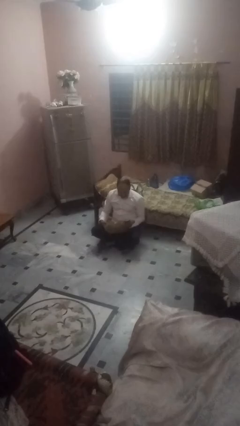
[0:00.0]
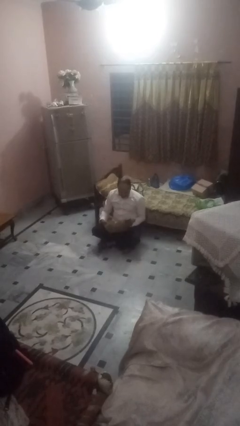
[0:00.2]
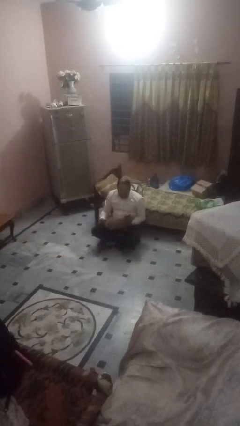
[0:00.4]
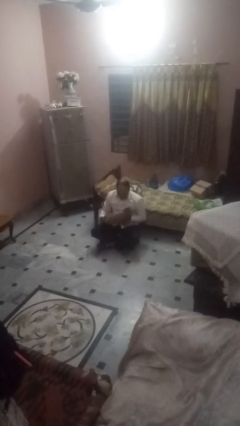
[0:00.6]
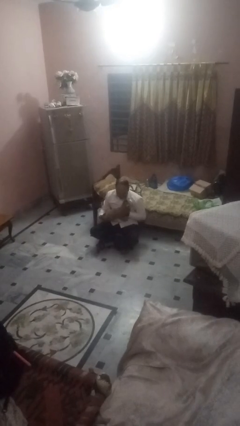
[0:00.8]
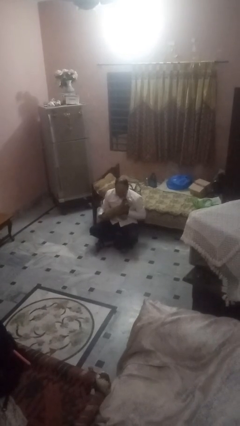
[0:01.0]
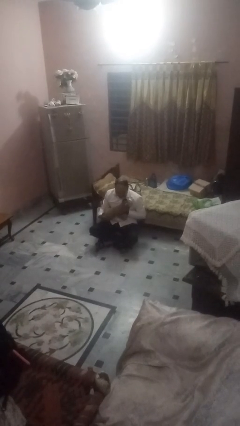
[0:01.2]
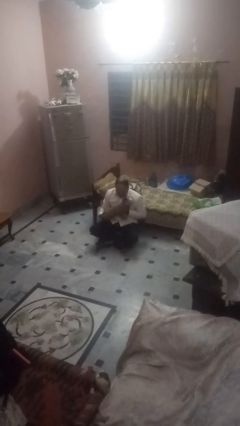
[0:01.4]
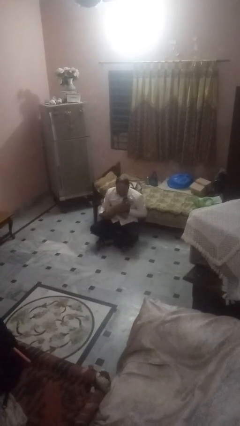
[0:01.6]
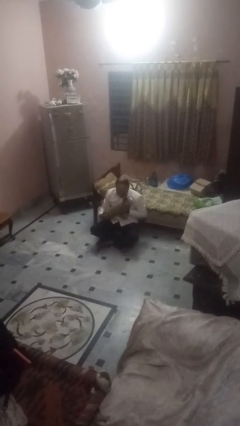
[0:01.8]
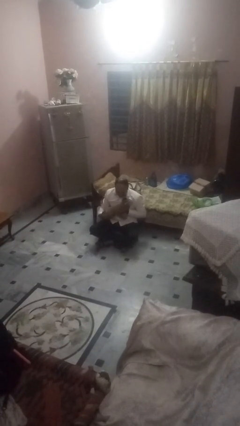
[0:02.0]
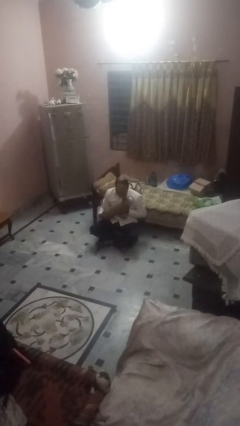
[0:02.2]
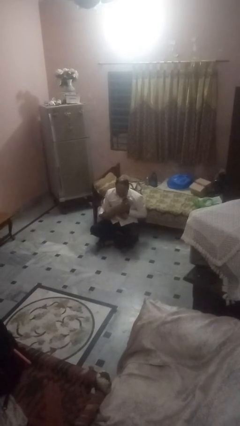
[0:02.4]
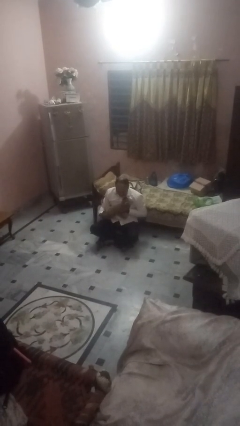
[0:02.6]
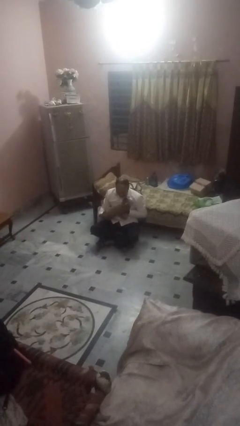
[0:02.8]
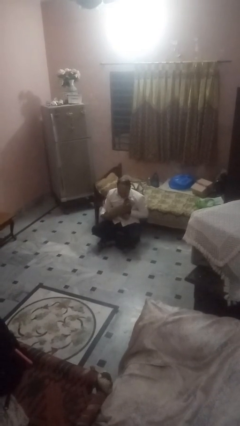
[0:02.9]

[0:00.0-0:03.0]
person hugs dog

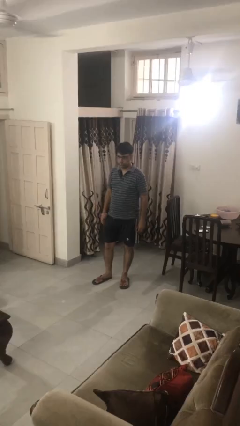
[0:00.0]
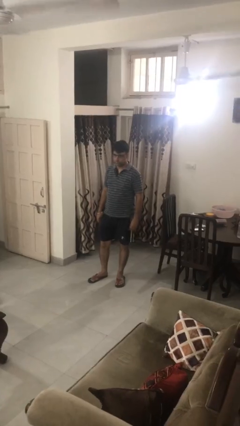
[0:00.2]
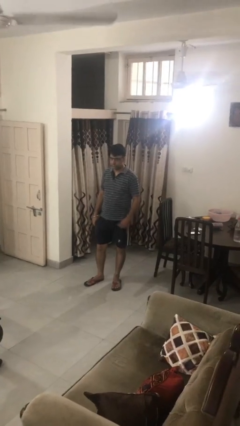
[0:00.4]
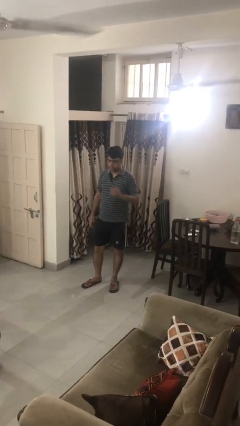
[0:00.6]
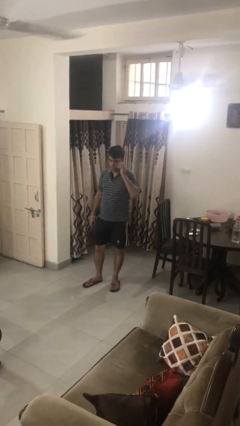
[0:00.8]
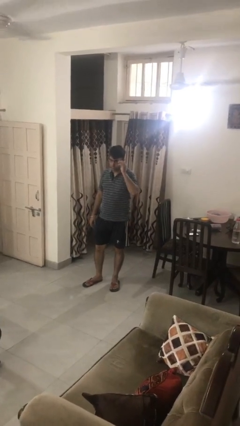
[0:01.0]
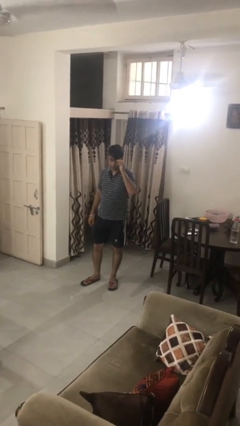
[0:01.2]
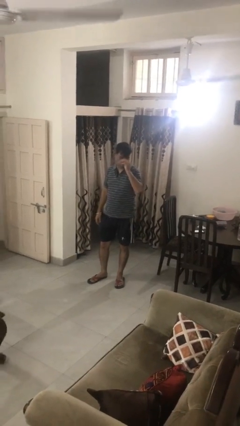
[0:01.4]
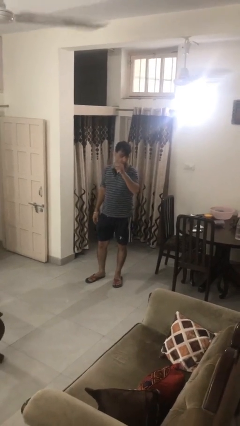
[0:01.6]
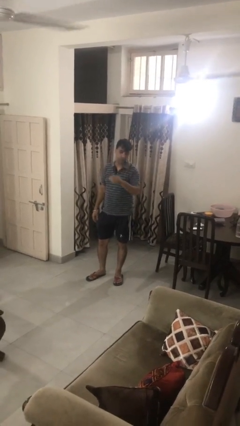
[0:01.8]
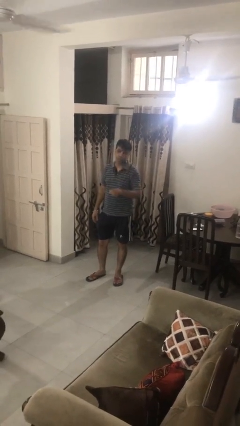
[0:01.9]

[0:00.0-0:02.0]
person takes off glasses

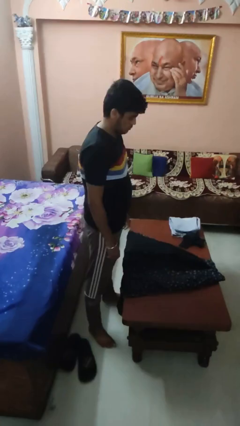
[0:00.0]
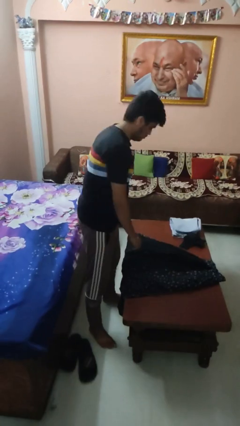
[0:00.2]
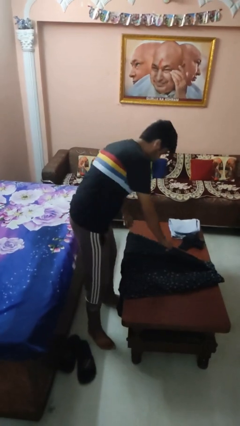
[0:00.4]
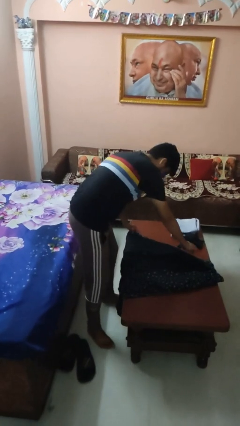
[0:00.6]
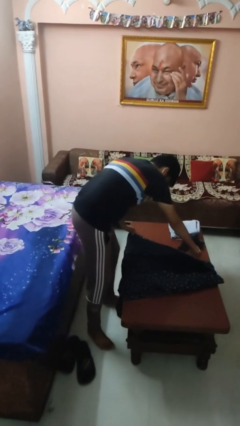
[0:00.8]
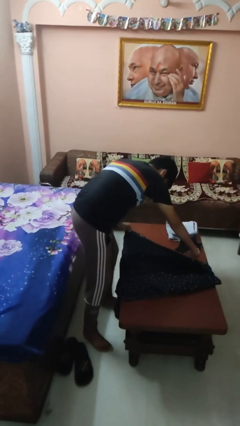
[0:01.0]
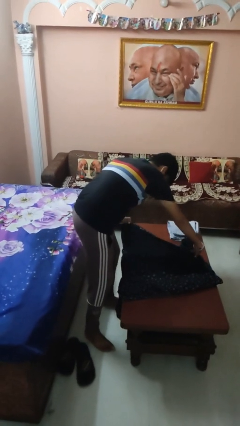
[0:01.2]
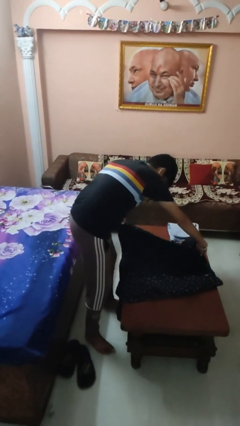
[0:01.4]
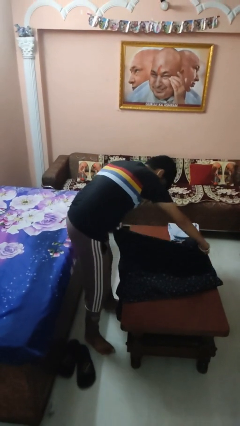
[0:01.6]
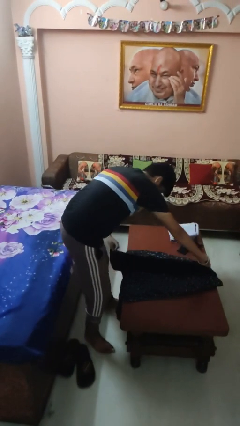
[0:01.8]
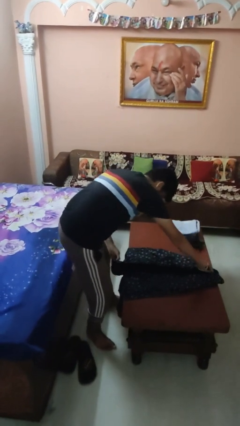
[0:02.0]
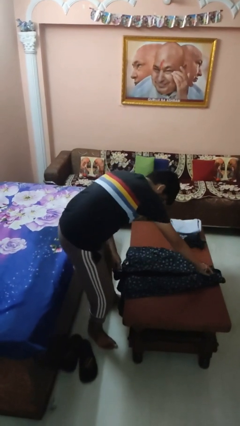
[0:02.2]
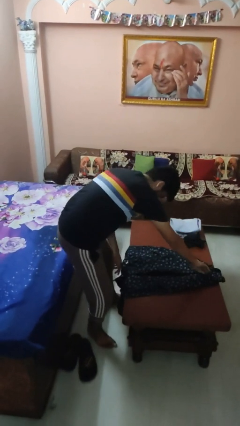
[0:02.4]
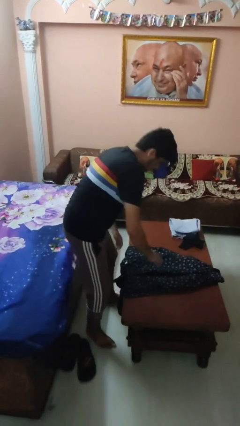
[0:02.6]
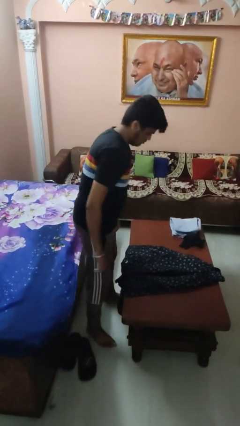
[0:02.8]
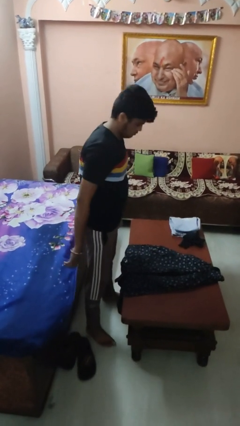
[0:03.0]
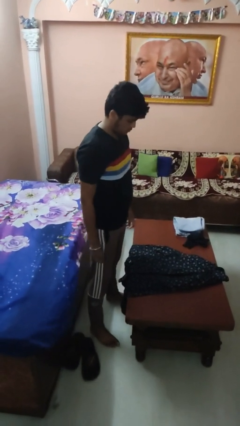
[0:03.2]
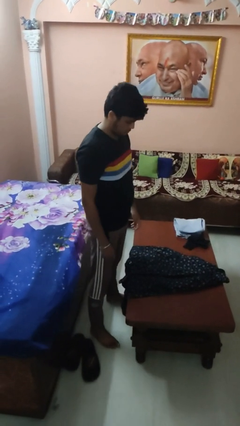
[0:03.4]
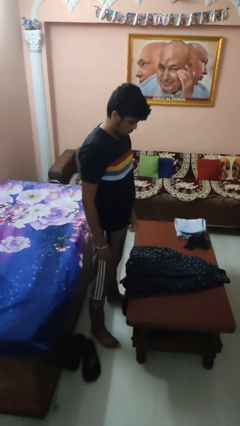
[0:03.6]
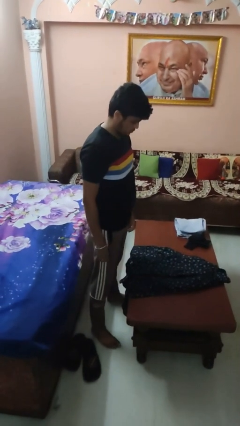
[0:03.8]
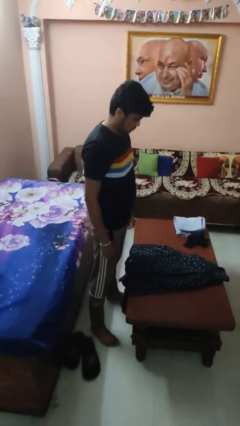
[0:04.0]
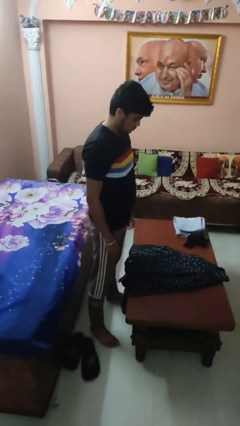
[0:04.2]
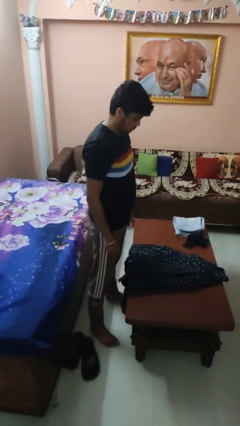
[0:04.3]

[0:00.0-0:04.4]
person folds shirt

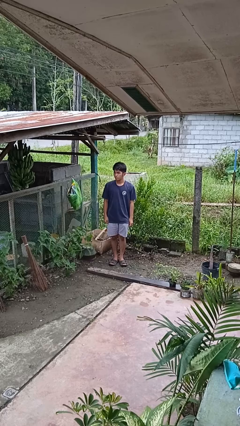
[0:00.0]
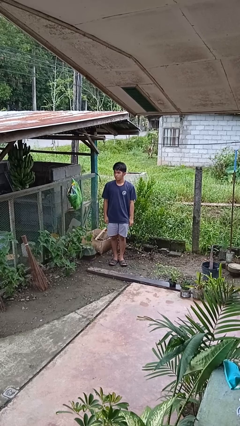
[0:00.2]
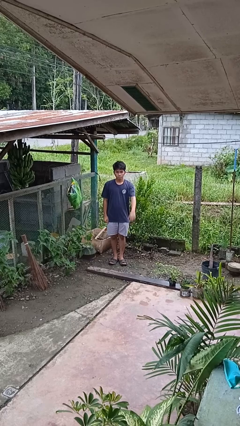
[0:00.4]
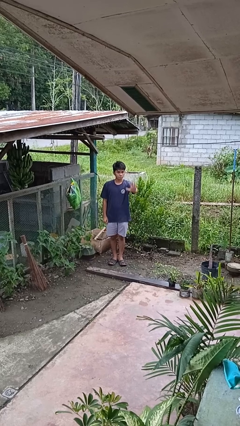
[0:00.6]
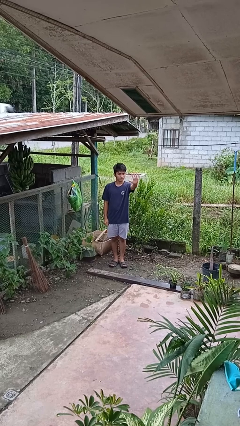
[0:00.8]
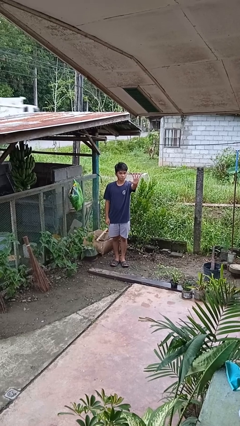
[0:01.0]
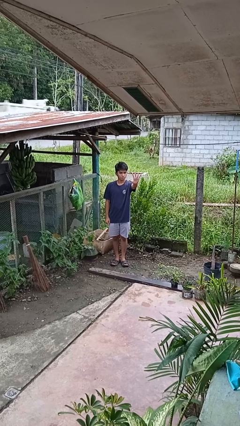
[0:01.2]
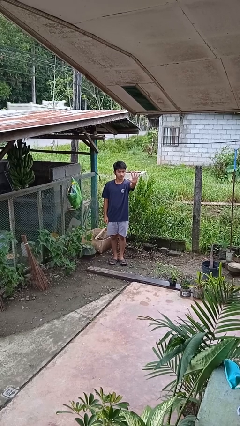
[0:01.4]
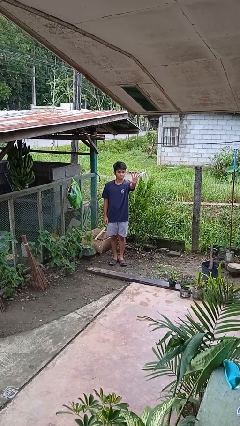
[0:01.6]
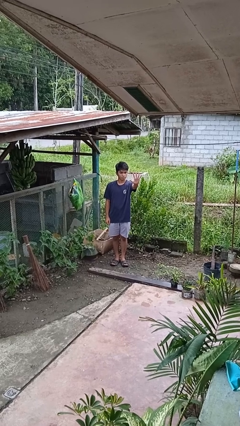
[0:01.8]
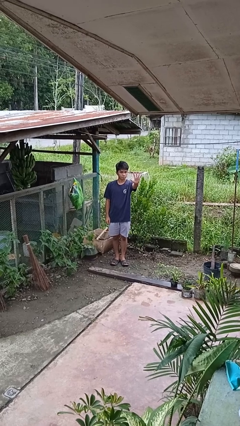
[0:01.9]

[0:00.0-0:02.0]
person gestures number five

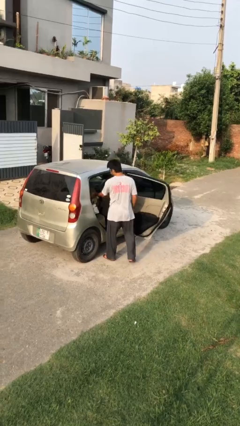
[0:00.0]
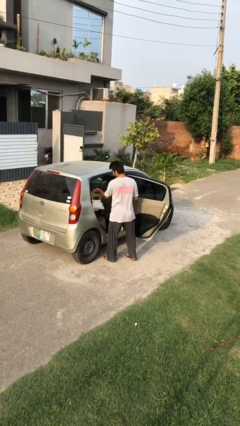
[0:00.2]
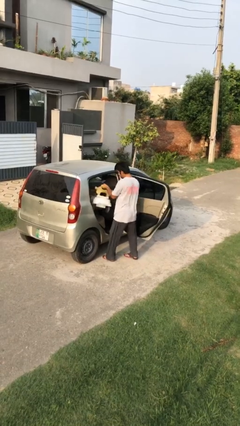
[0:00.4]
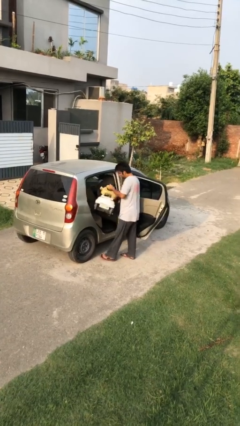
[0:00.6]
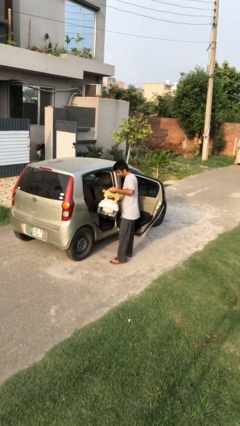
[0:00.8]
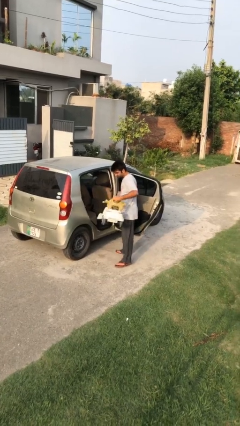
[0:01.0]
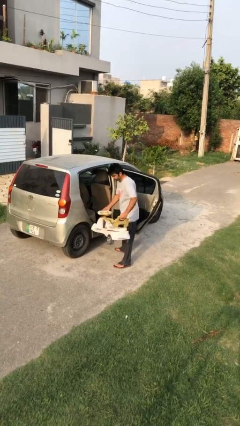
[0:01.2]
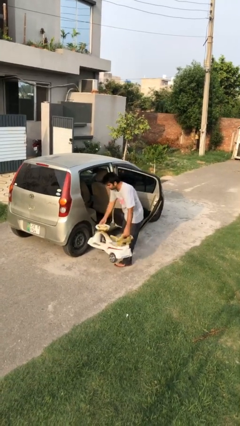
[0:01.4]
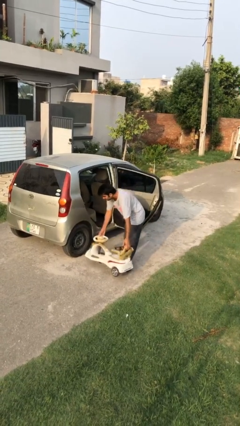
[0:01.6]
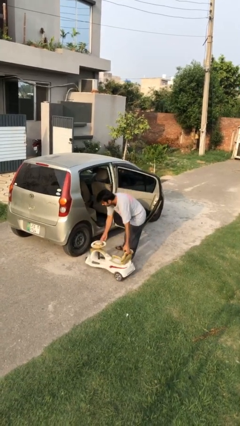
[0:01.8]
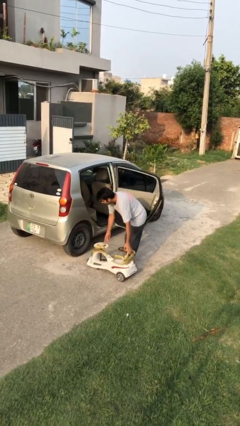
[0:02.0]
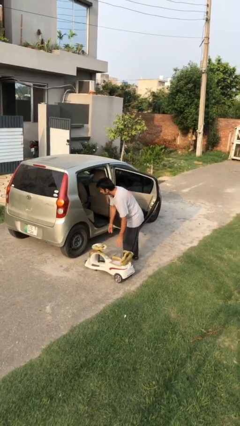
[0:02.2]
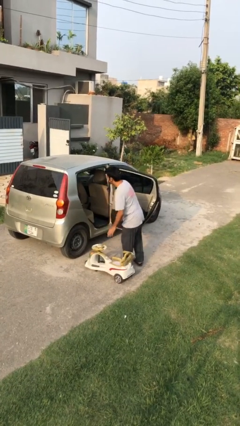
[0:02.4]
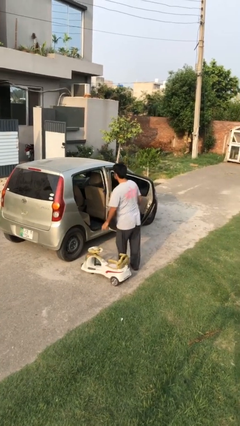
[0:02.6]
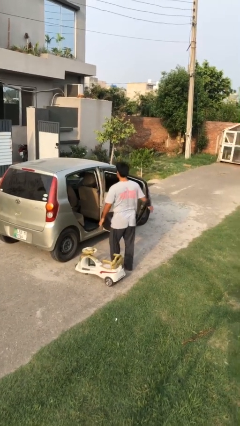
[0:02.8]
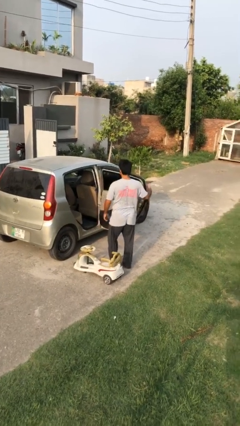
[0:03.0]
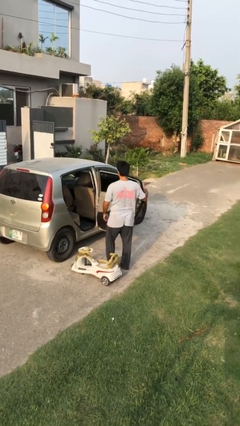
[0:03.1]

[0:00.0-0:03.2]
person unloads car

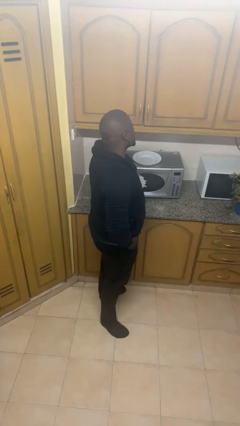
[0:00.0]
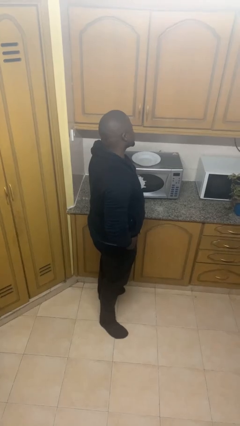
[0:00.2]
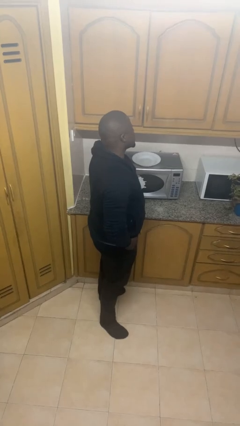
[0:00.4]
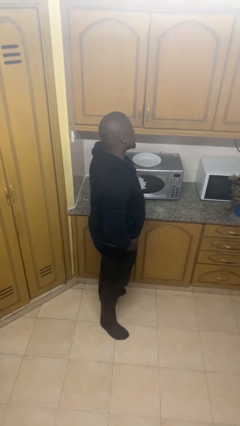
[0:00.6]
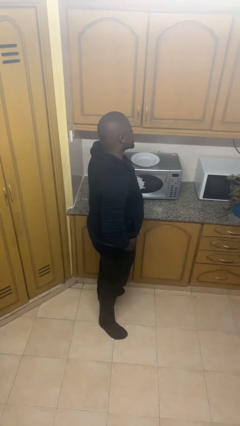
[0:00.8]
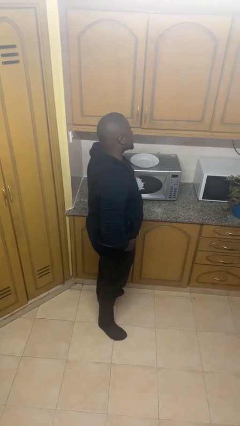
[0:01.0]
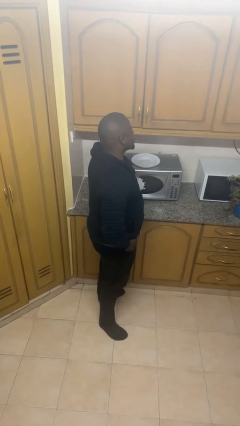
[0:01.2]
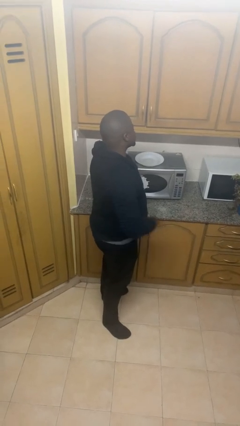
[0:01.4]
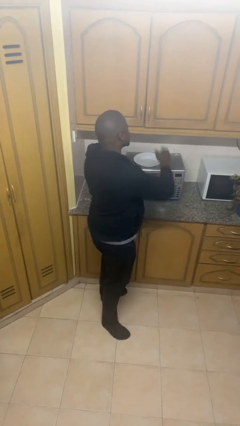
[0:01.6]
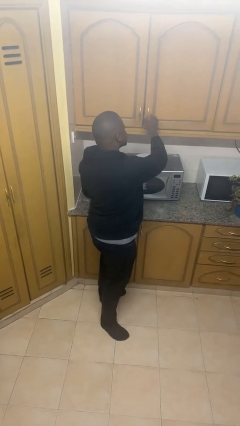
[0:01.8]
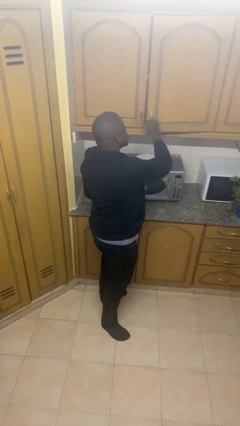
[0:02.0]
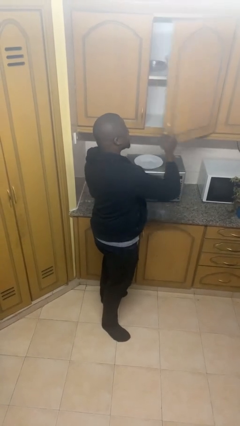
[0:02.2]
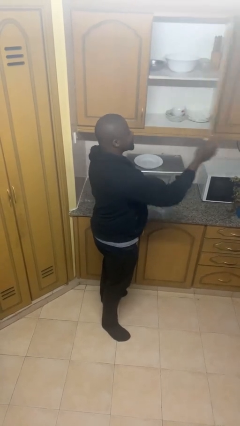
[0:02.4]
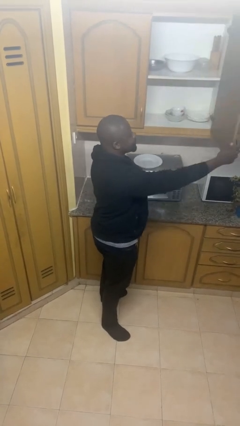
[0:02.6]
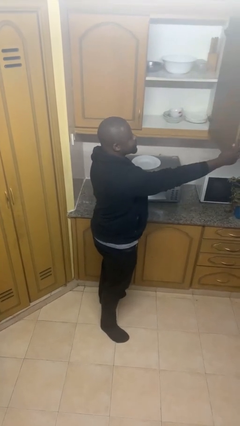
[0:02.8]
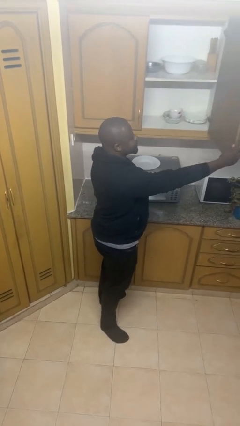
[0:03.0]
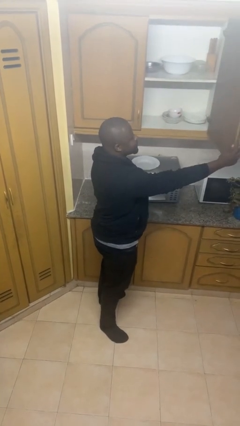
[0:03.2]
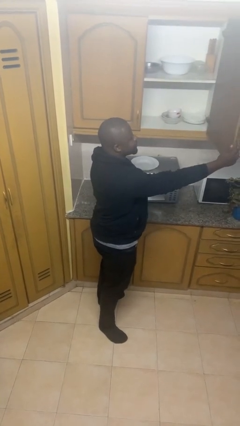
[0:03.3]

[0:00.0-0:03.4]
person opens cabinet
